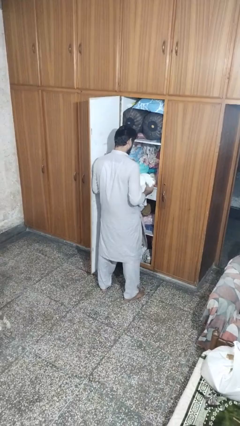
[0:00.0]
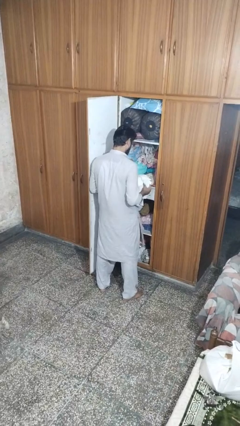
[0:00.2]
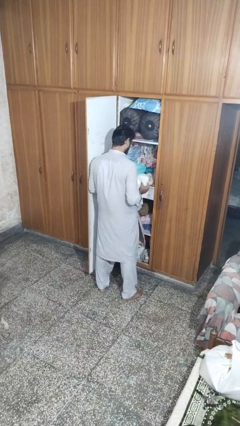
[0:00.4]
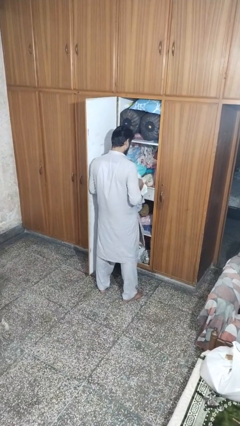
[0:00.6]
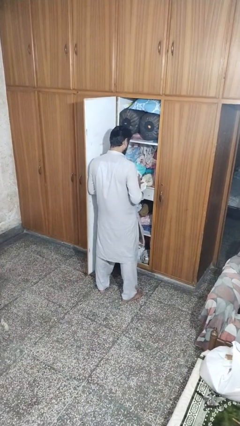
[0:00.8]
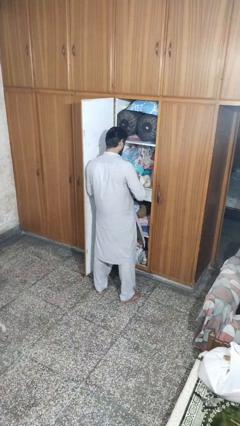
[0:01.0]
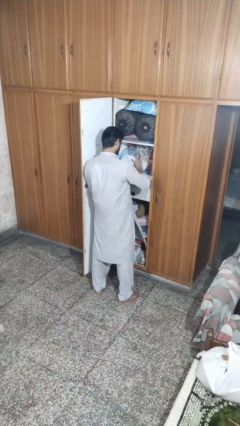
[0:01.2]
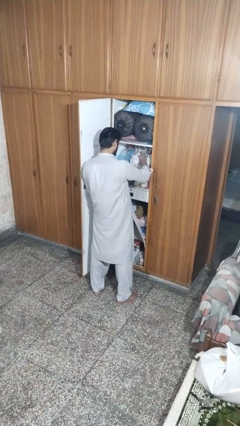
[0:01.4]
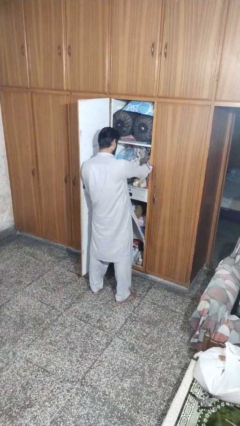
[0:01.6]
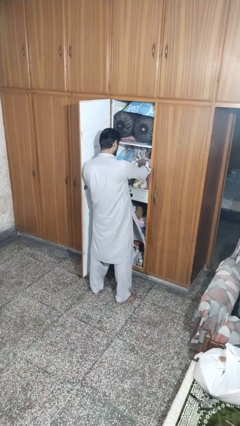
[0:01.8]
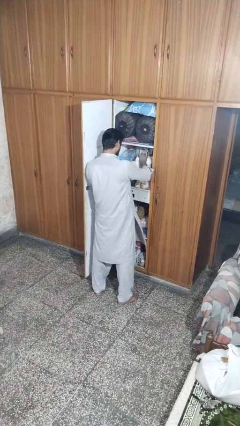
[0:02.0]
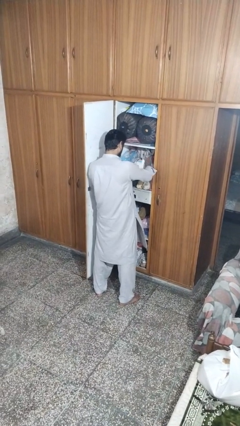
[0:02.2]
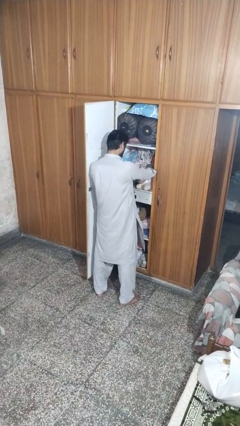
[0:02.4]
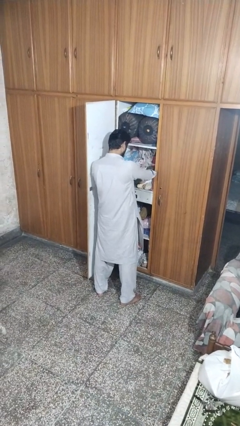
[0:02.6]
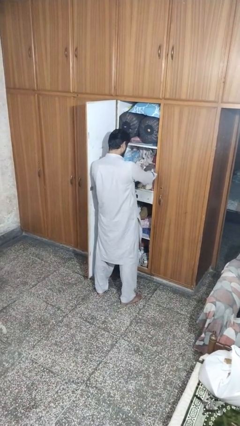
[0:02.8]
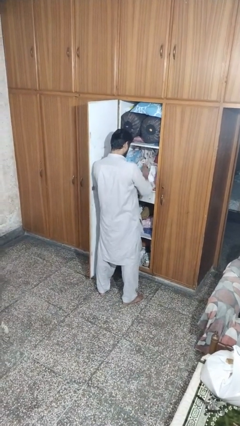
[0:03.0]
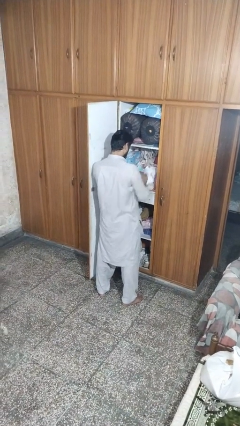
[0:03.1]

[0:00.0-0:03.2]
person puts down object into cabinet

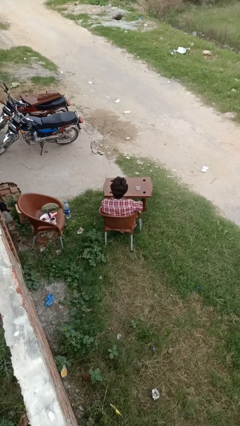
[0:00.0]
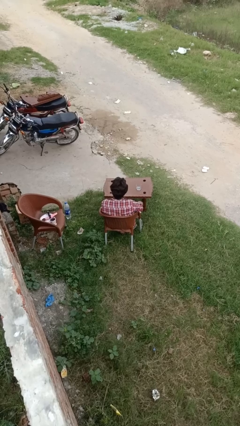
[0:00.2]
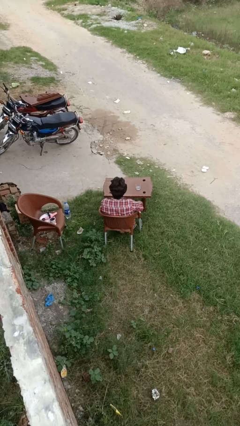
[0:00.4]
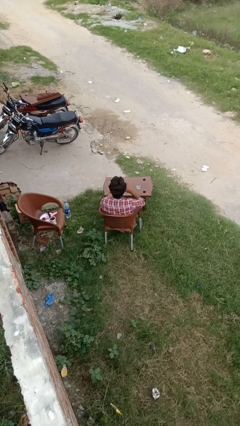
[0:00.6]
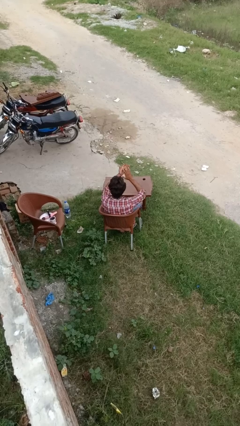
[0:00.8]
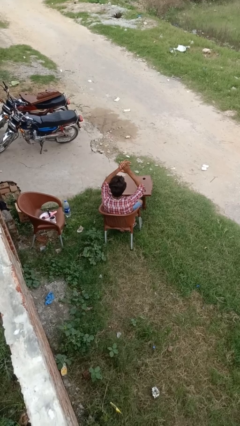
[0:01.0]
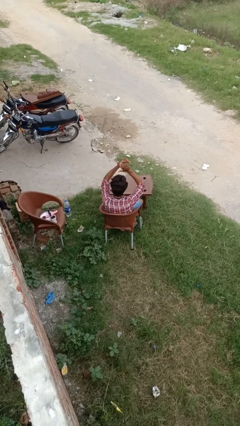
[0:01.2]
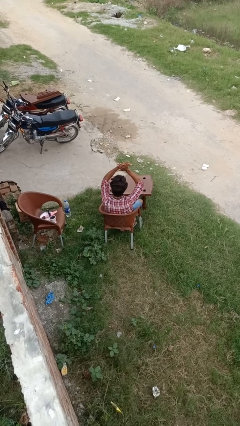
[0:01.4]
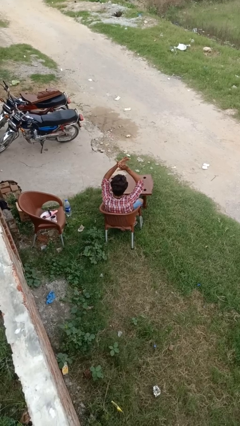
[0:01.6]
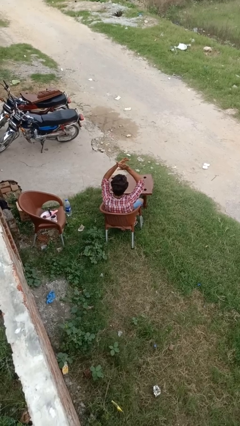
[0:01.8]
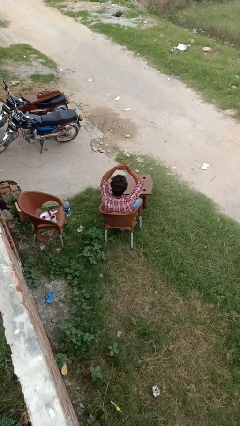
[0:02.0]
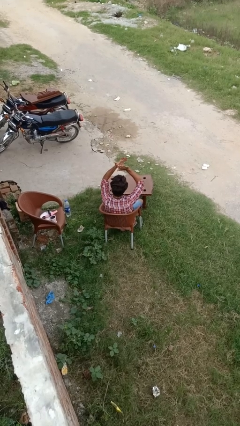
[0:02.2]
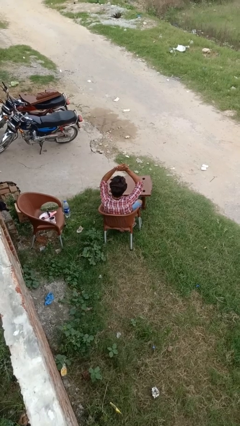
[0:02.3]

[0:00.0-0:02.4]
person claps hands

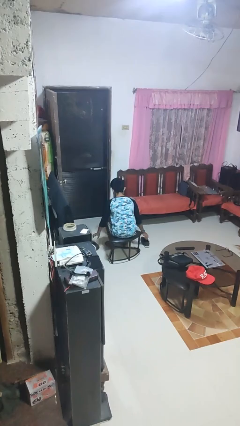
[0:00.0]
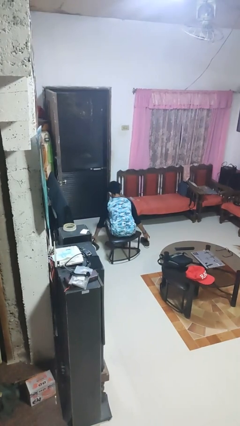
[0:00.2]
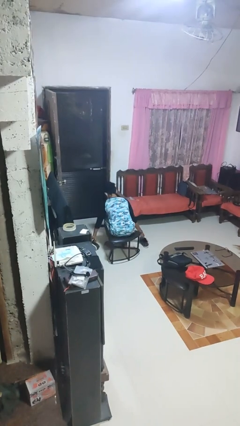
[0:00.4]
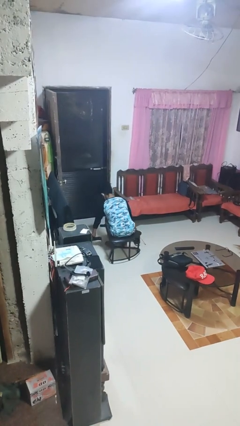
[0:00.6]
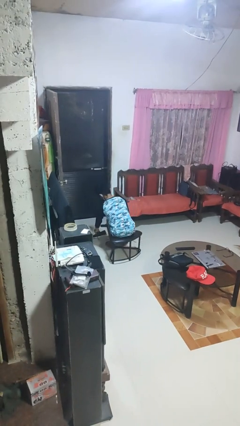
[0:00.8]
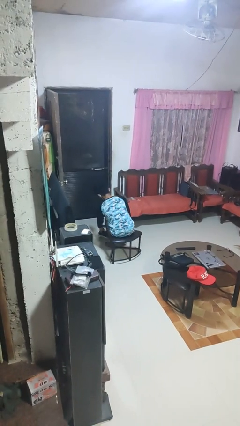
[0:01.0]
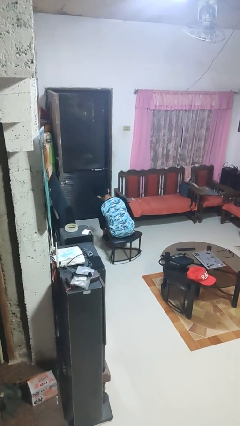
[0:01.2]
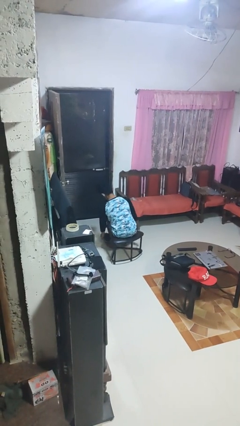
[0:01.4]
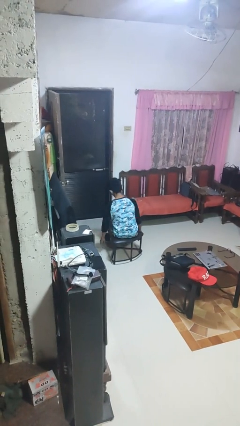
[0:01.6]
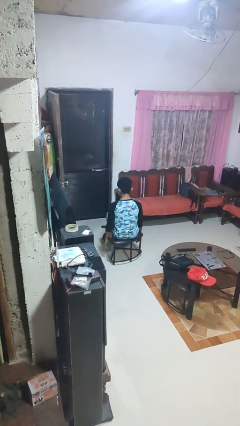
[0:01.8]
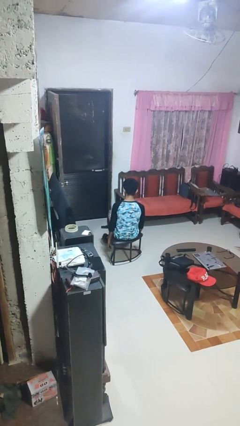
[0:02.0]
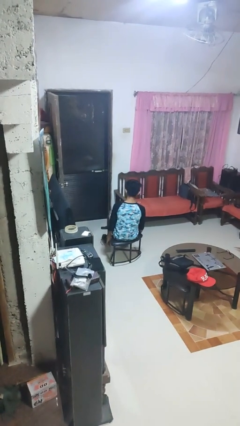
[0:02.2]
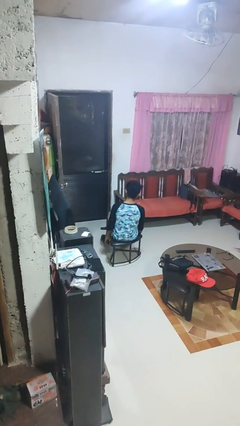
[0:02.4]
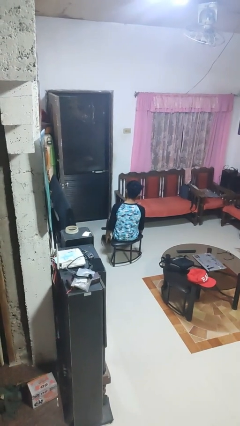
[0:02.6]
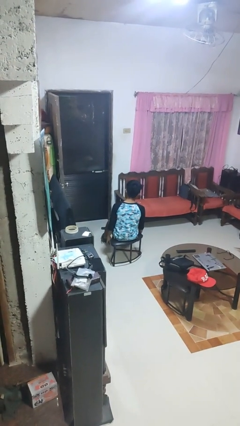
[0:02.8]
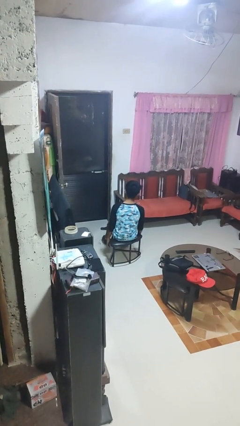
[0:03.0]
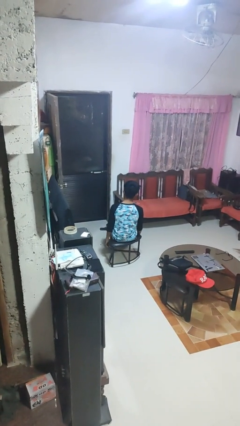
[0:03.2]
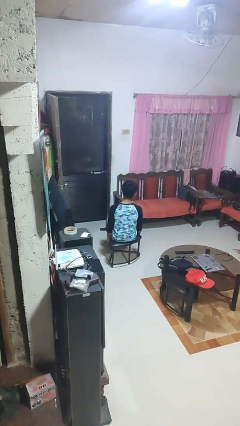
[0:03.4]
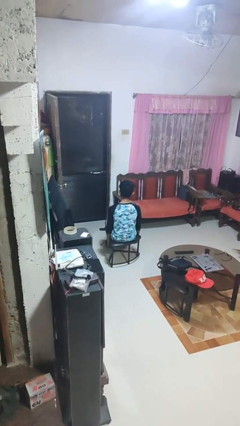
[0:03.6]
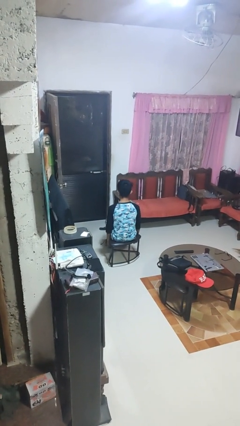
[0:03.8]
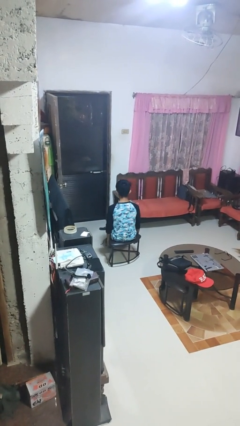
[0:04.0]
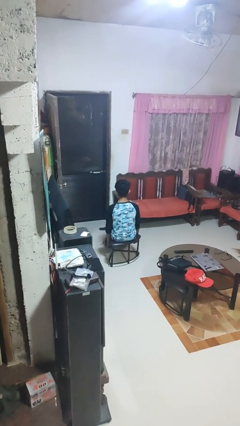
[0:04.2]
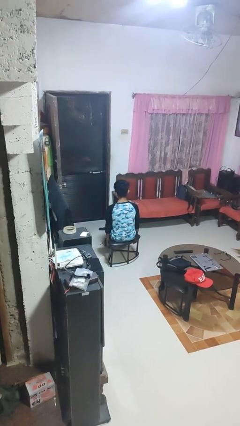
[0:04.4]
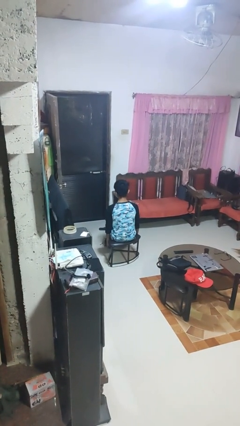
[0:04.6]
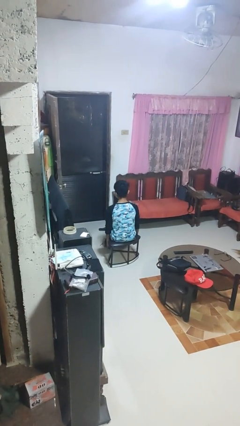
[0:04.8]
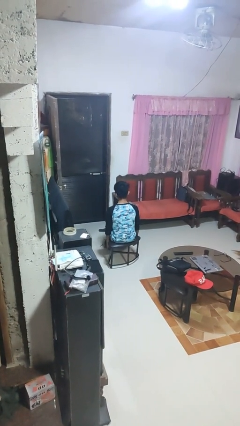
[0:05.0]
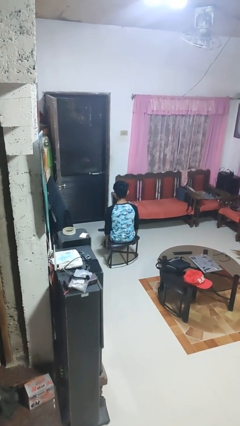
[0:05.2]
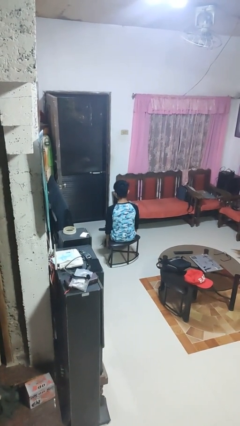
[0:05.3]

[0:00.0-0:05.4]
person puts on shoes

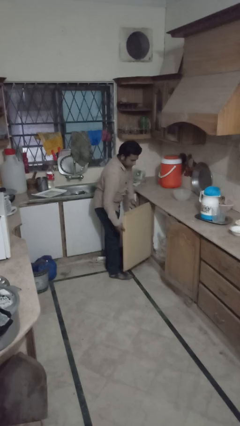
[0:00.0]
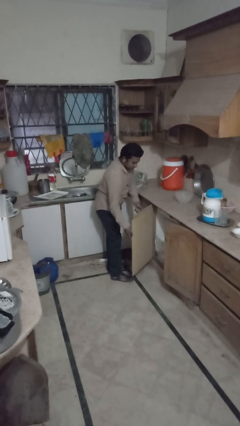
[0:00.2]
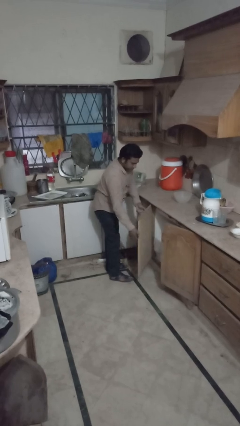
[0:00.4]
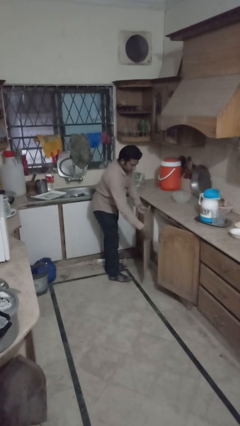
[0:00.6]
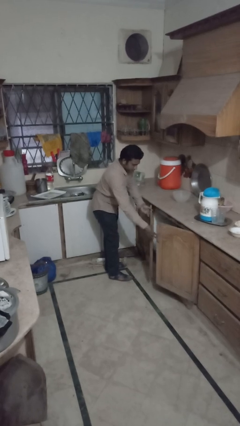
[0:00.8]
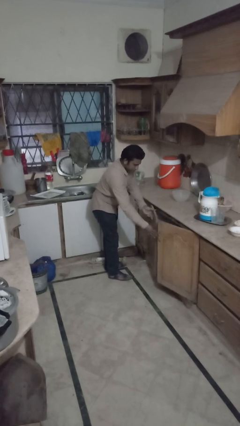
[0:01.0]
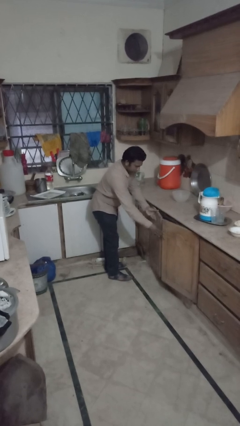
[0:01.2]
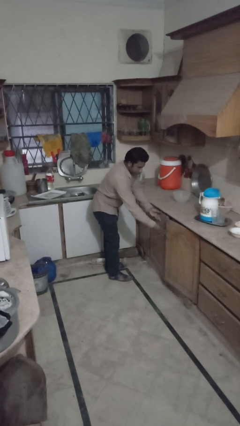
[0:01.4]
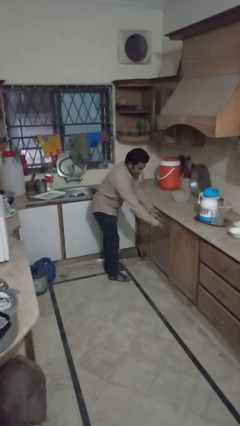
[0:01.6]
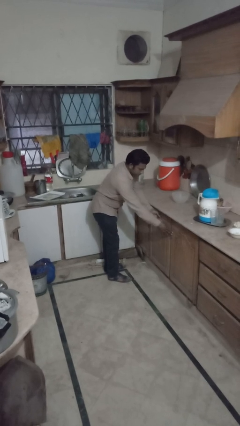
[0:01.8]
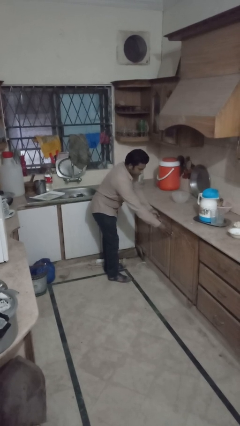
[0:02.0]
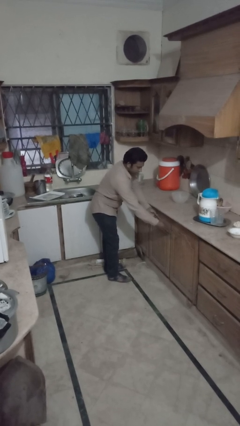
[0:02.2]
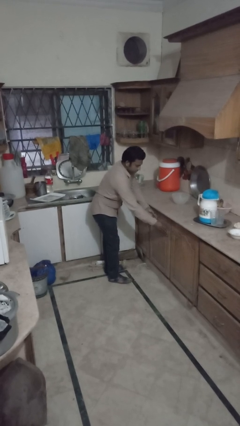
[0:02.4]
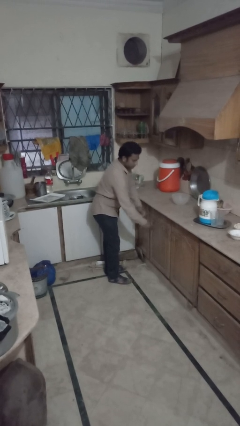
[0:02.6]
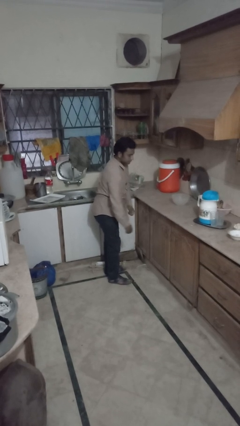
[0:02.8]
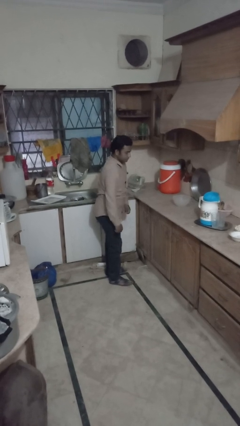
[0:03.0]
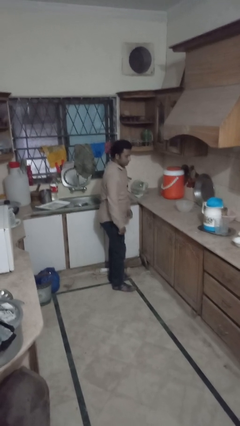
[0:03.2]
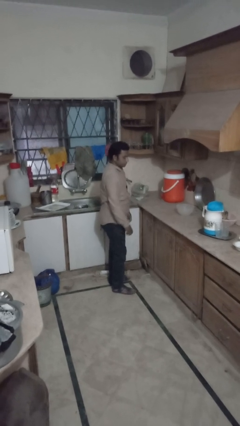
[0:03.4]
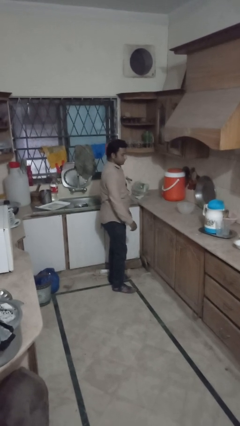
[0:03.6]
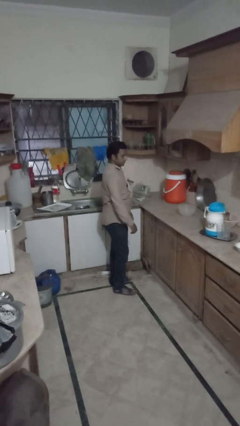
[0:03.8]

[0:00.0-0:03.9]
person closes cabinet

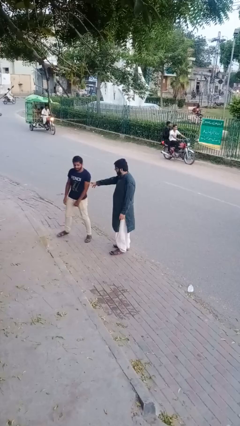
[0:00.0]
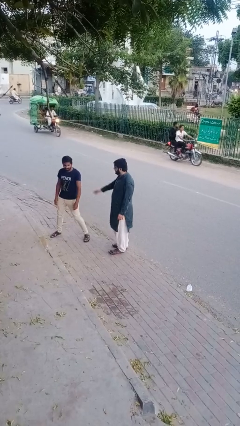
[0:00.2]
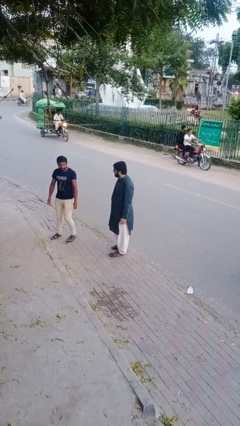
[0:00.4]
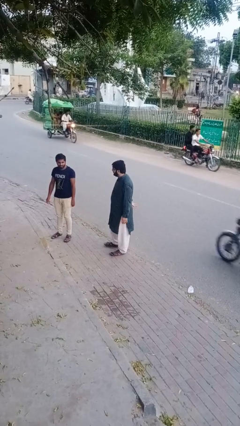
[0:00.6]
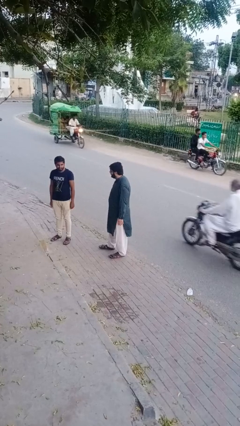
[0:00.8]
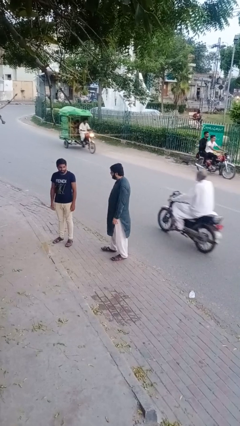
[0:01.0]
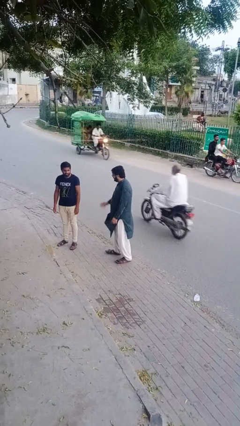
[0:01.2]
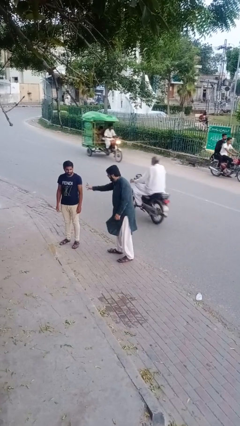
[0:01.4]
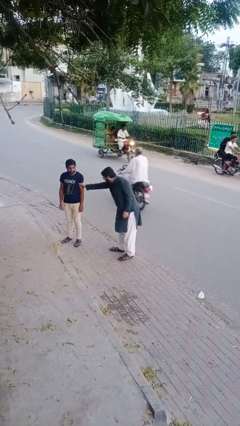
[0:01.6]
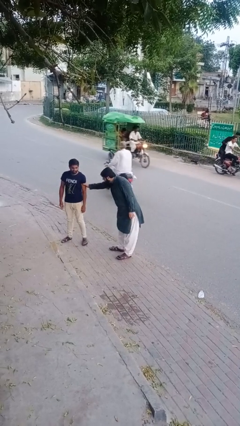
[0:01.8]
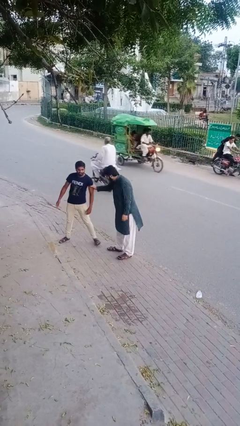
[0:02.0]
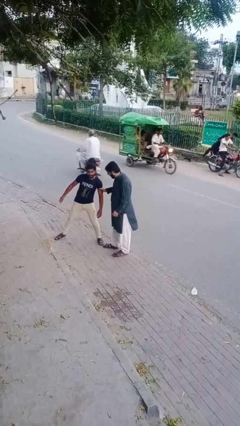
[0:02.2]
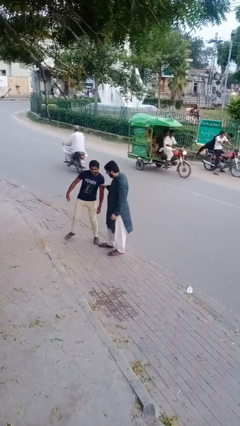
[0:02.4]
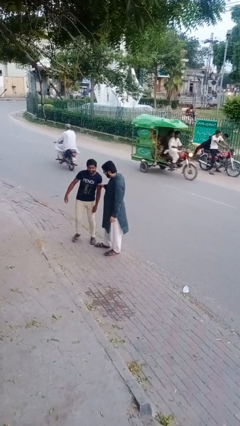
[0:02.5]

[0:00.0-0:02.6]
person grabs person by bicep

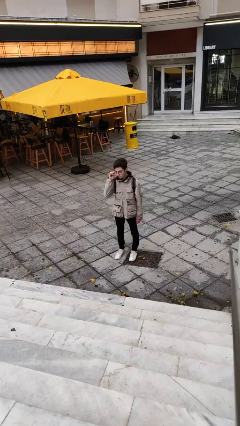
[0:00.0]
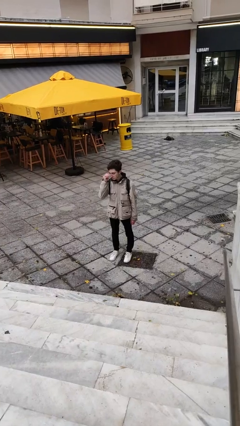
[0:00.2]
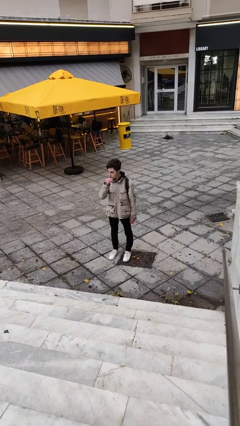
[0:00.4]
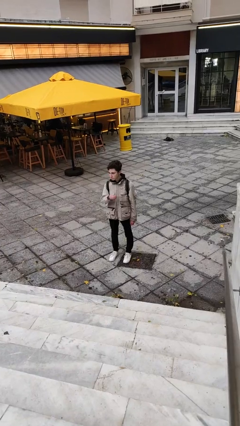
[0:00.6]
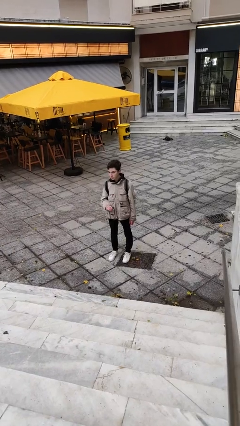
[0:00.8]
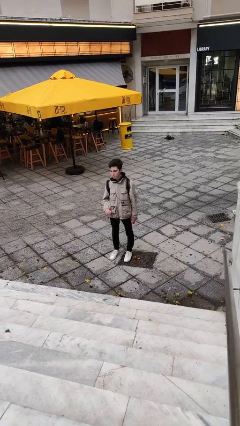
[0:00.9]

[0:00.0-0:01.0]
person takes off glasses
